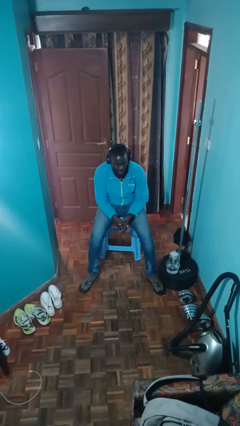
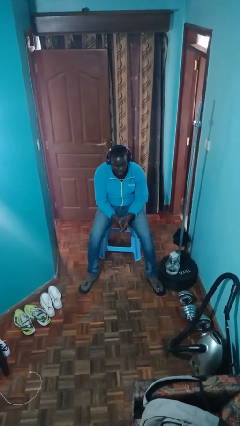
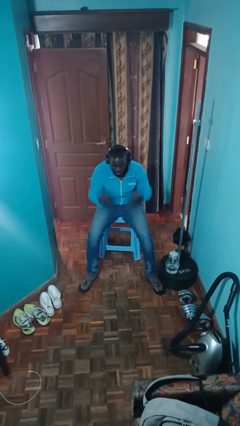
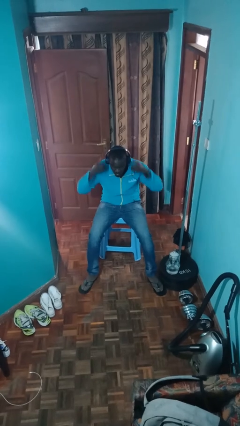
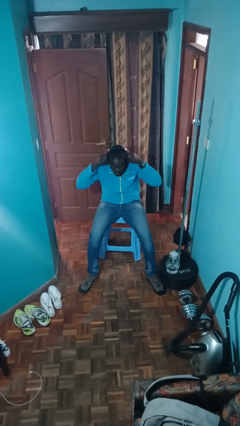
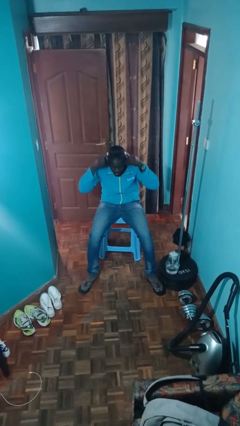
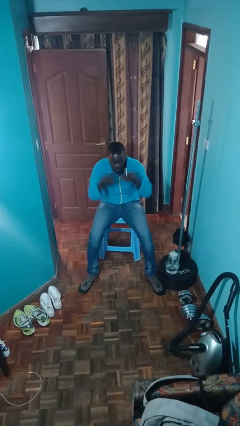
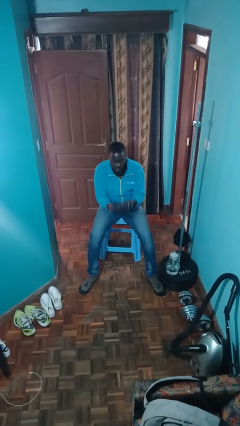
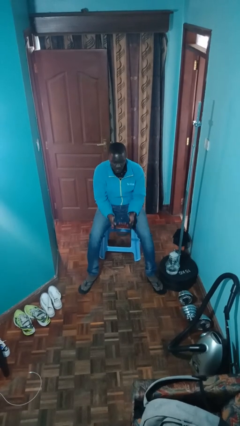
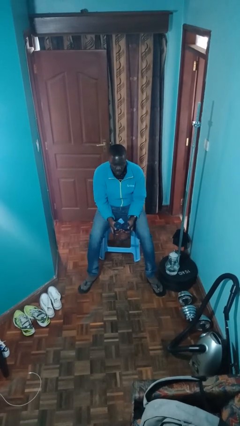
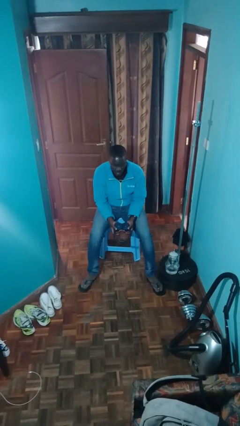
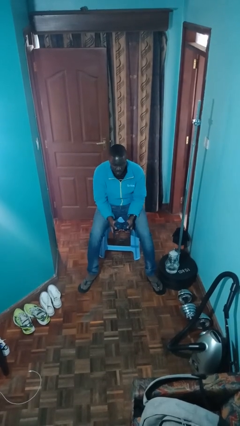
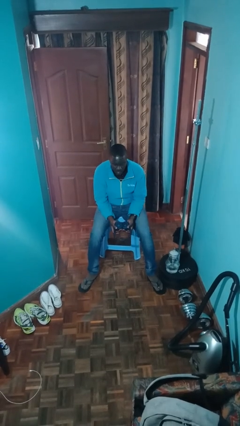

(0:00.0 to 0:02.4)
person takes off headphones

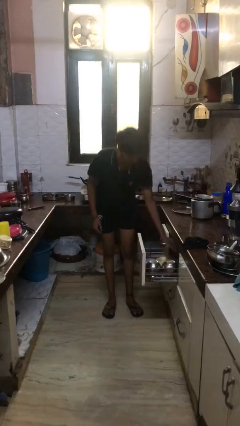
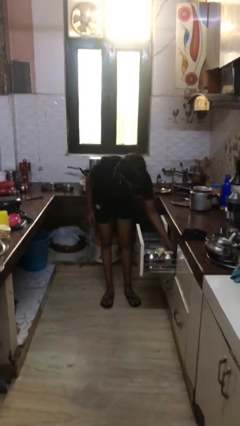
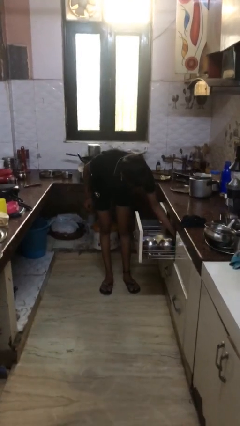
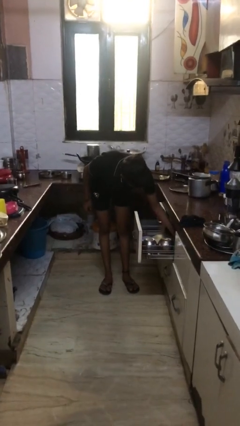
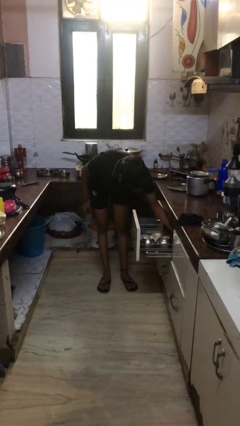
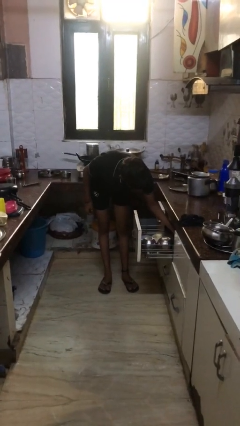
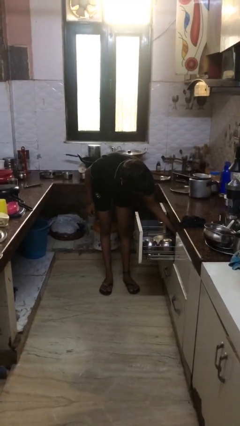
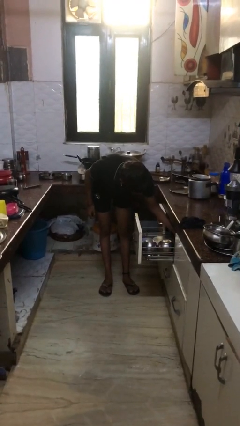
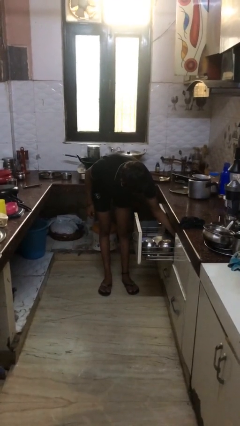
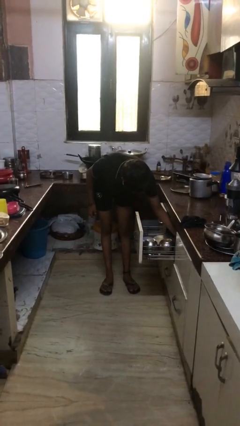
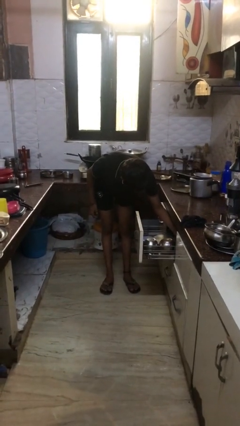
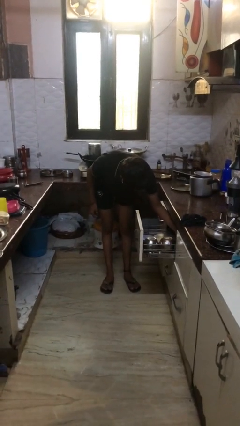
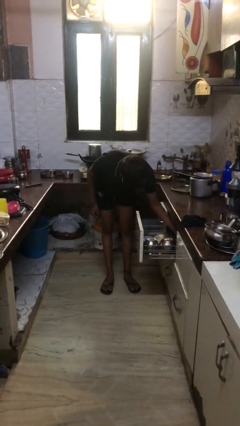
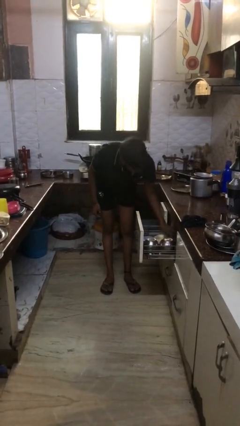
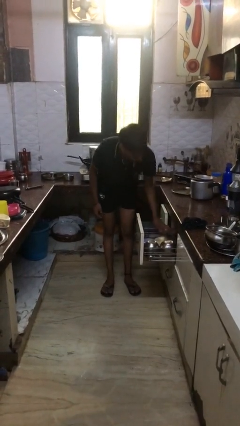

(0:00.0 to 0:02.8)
person searches in kitchen drawer

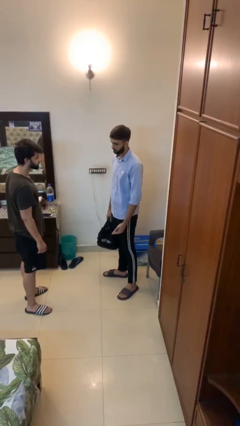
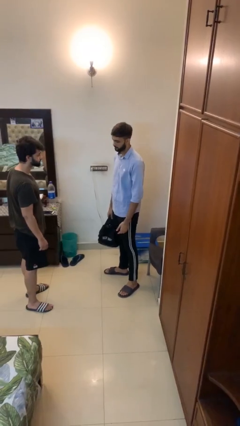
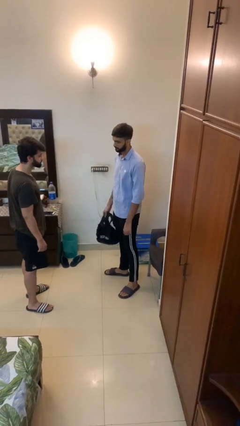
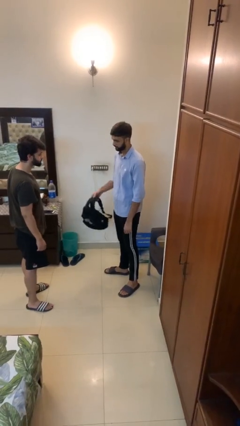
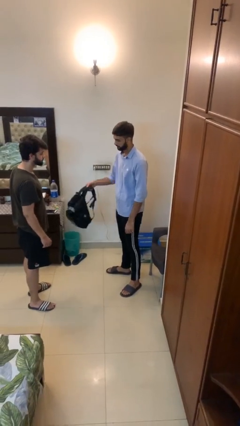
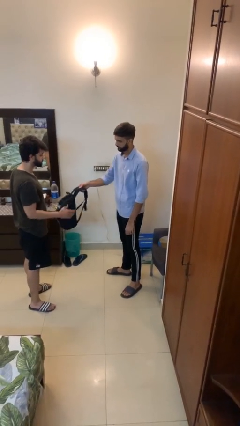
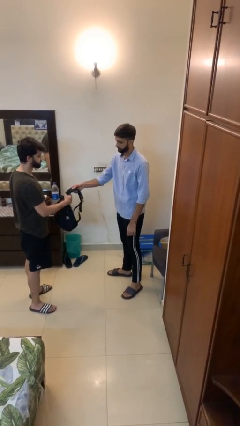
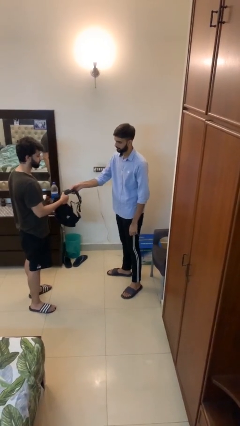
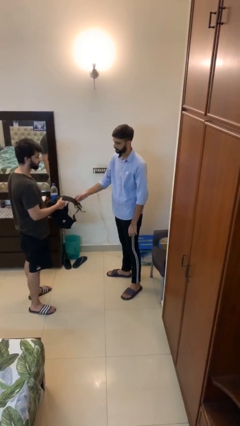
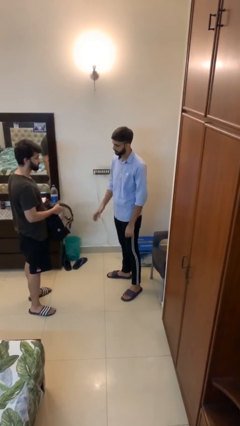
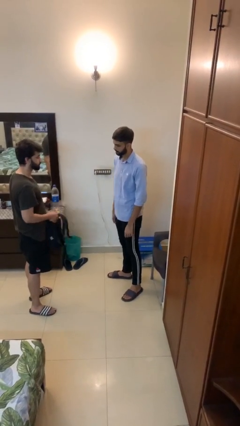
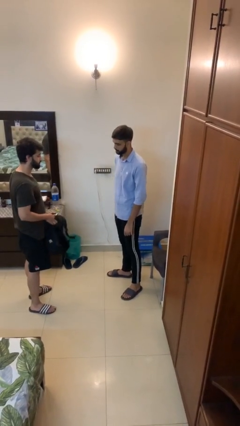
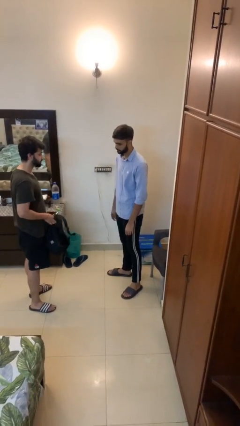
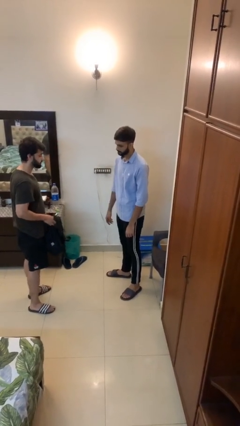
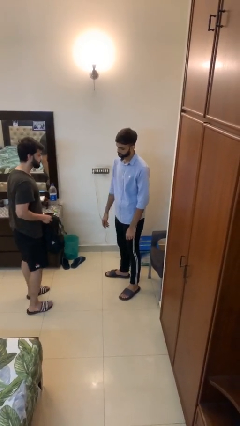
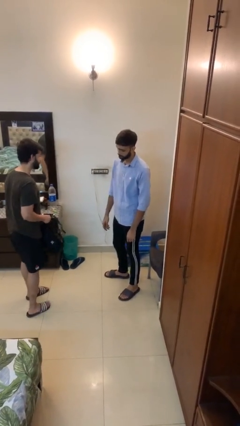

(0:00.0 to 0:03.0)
person transfers object to person

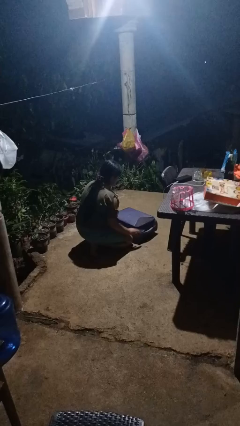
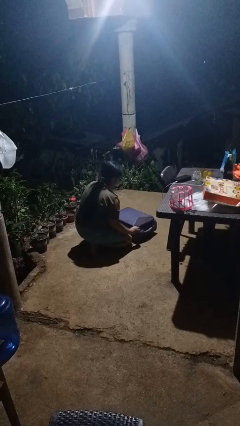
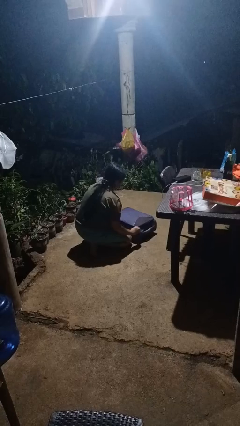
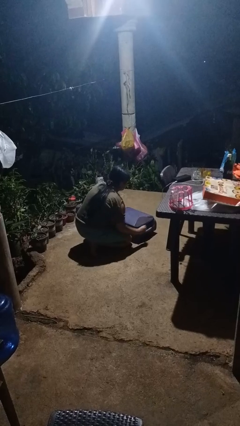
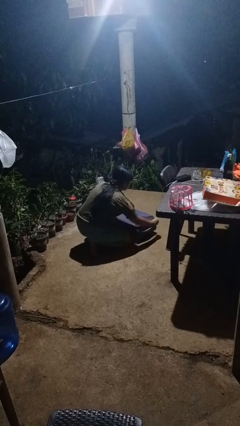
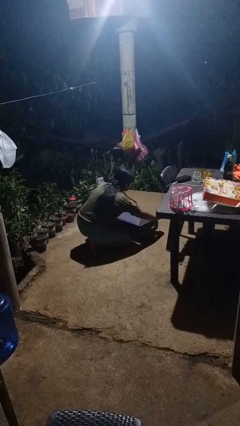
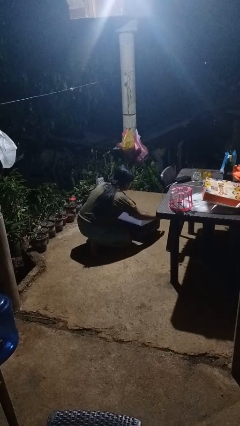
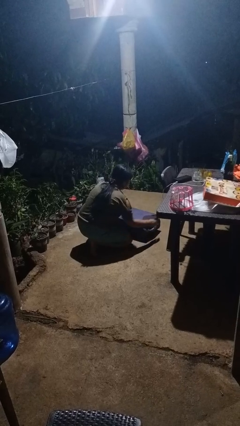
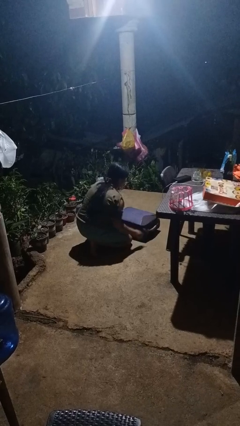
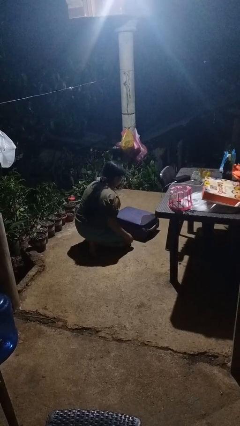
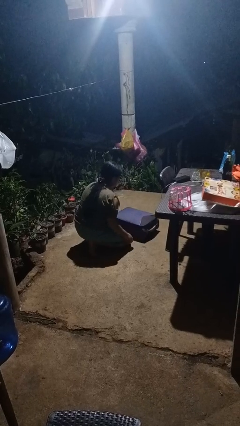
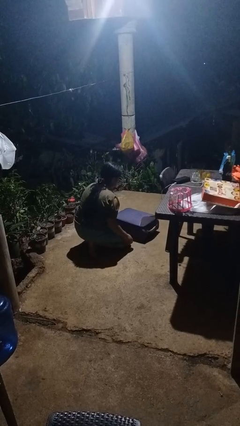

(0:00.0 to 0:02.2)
person opens suitcase

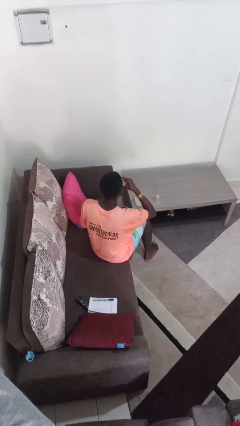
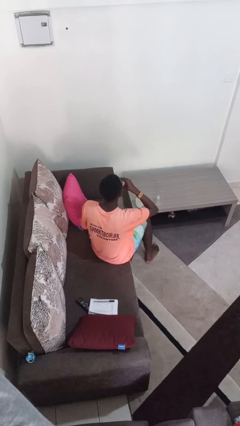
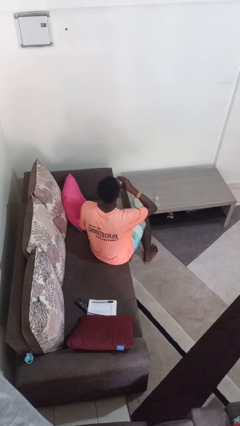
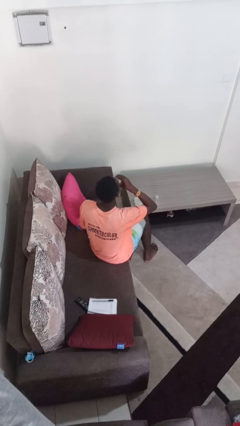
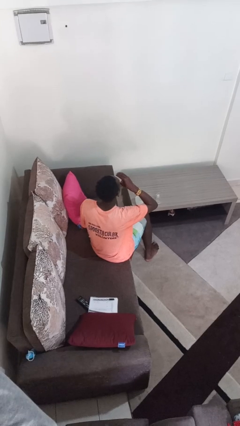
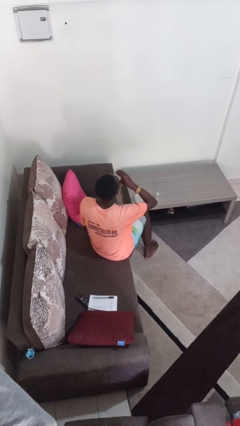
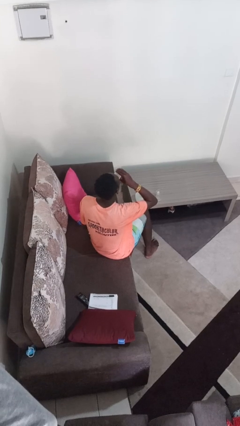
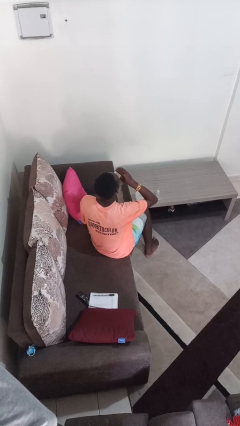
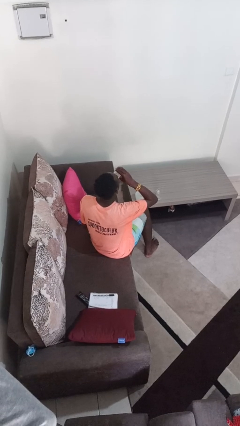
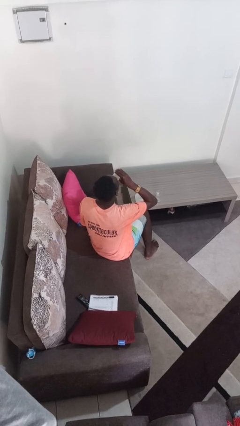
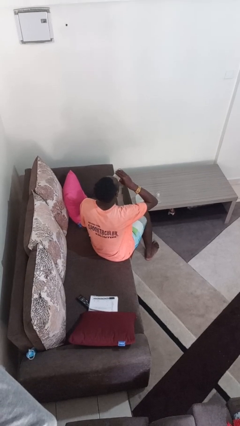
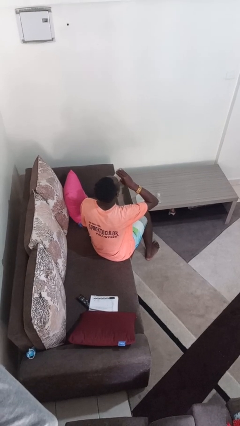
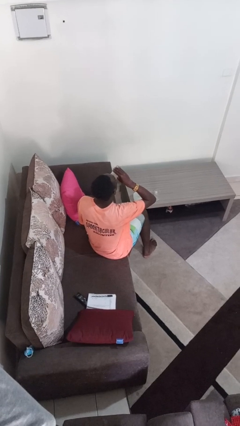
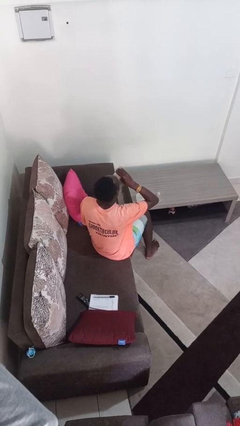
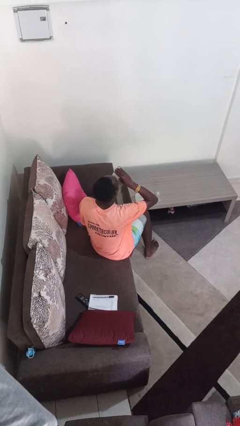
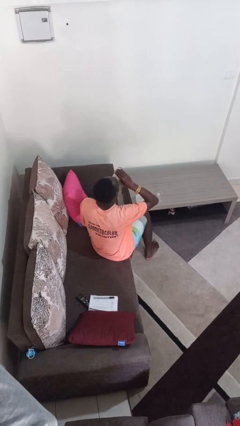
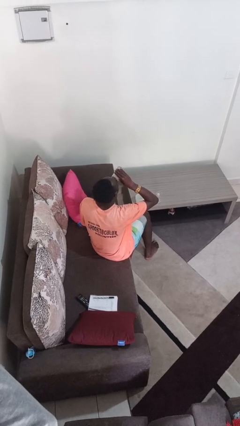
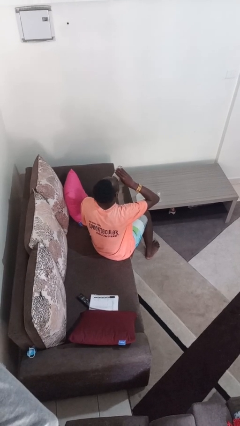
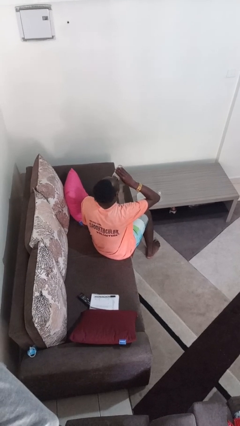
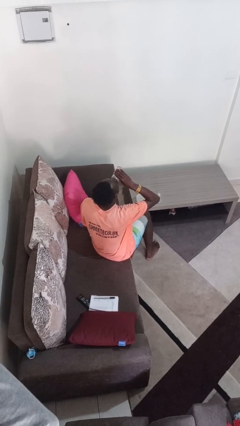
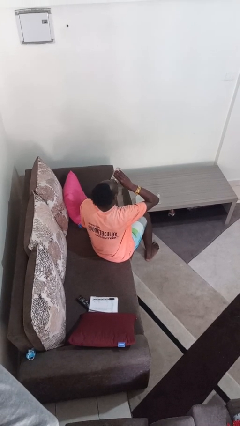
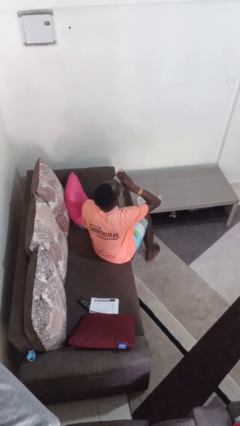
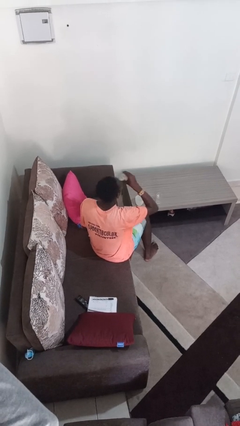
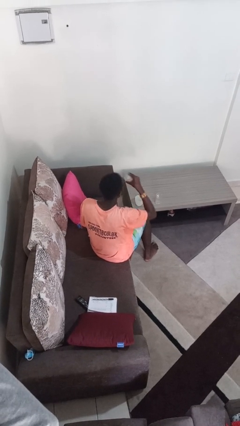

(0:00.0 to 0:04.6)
person drinks from shotglass

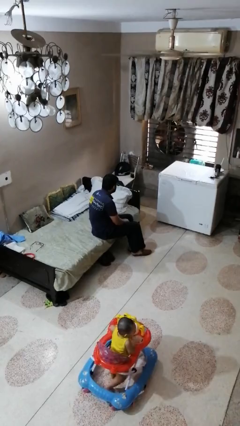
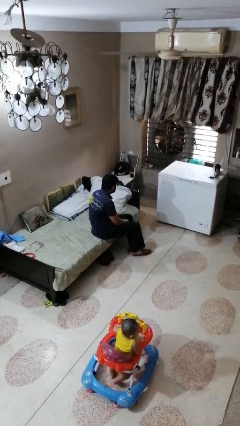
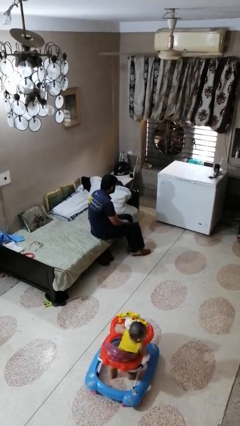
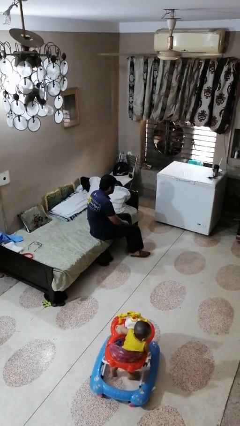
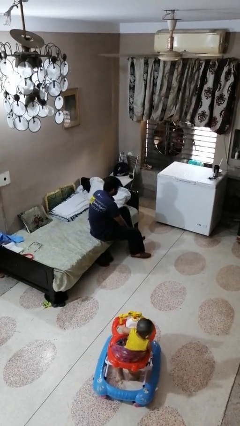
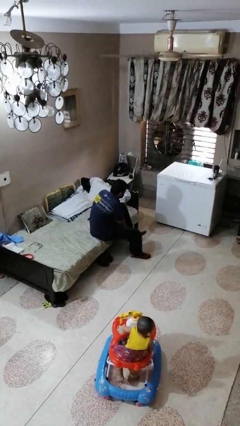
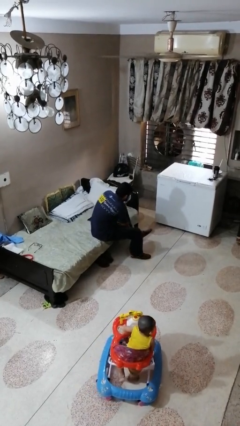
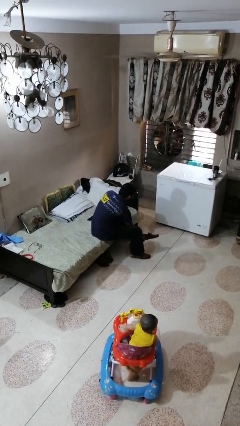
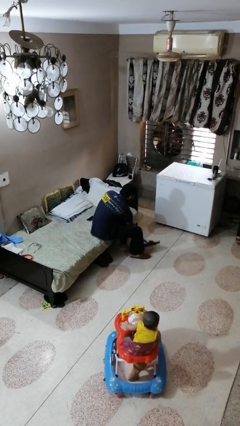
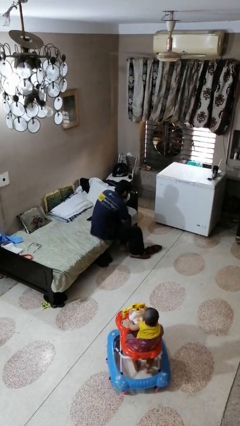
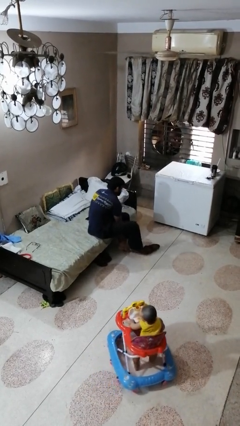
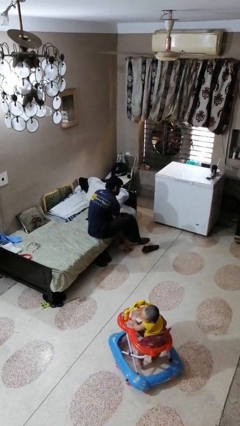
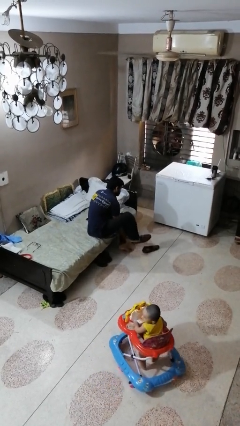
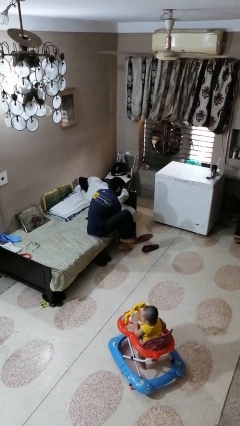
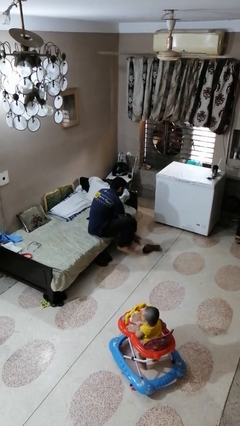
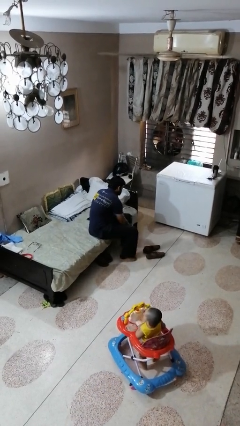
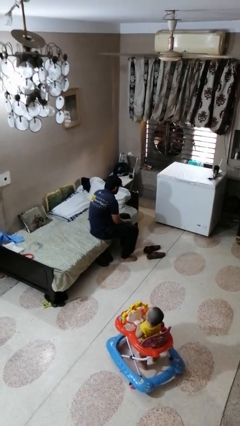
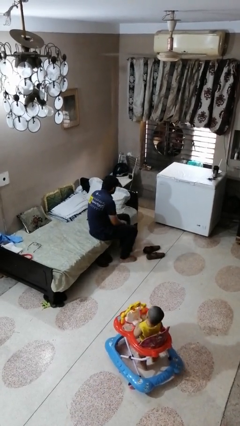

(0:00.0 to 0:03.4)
person takes off shoes
